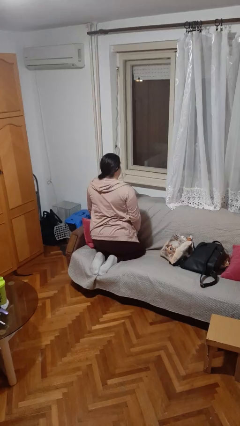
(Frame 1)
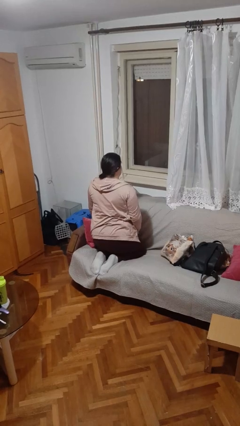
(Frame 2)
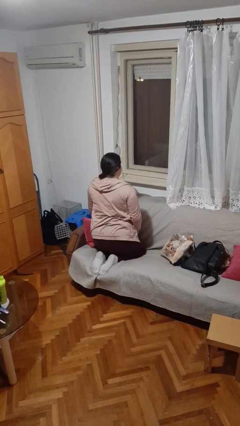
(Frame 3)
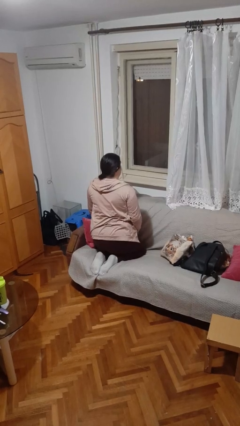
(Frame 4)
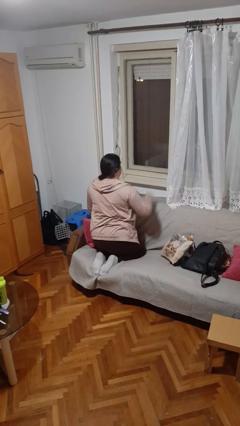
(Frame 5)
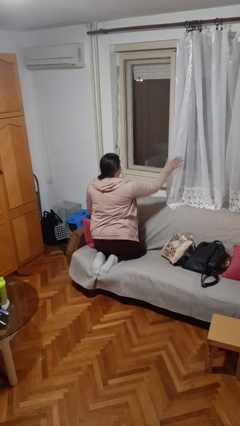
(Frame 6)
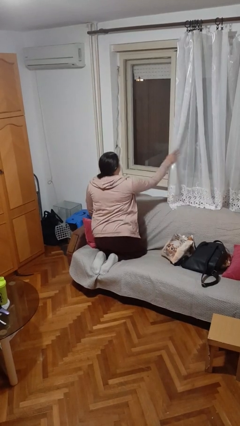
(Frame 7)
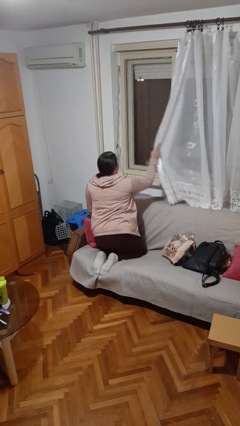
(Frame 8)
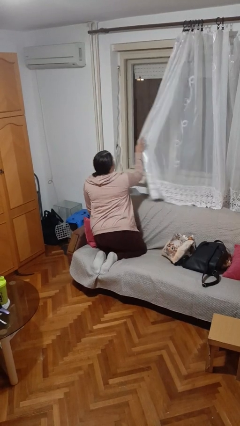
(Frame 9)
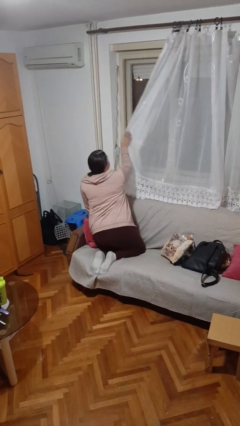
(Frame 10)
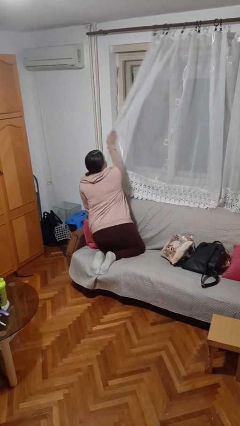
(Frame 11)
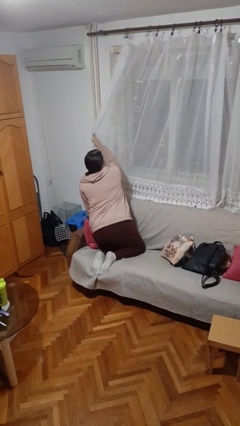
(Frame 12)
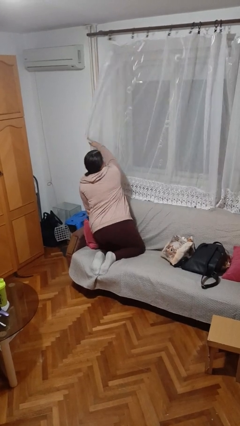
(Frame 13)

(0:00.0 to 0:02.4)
person closes curtains

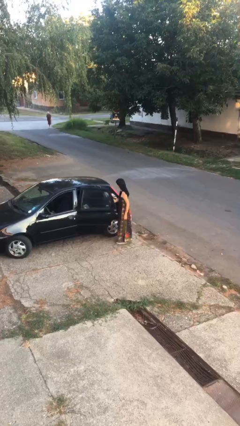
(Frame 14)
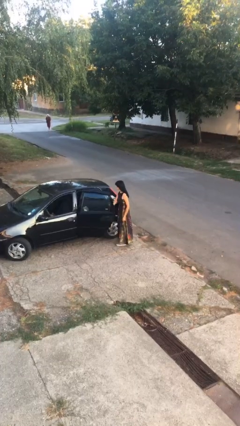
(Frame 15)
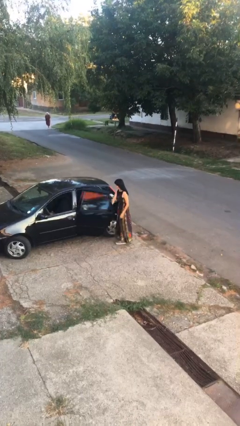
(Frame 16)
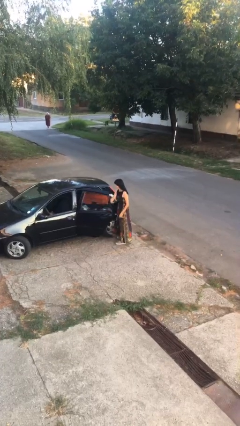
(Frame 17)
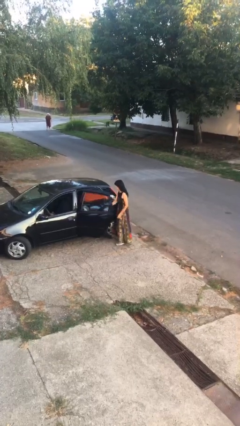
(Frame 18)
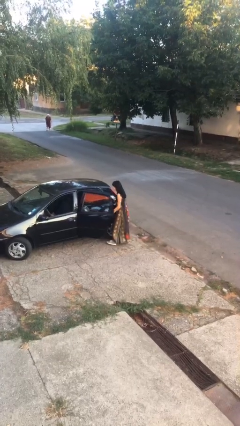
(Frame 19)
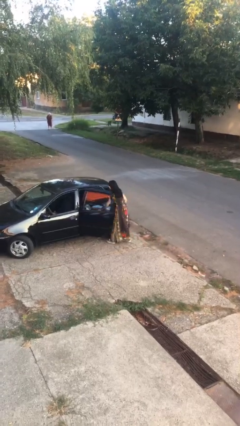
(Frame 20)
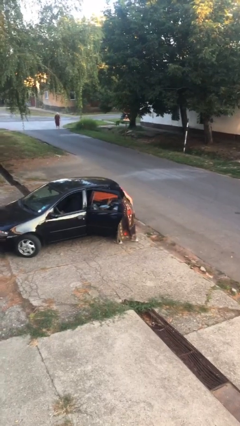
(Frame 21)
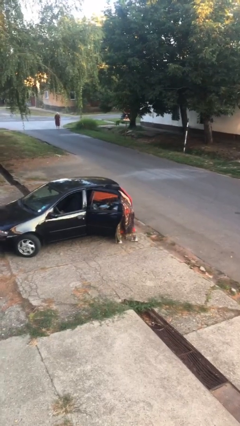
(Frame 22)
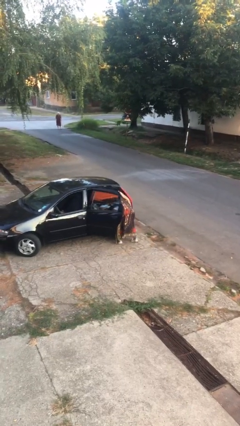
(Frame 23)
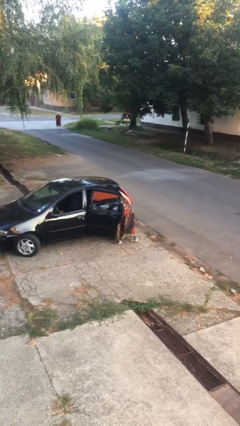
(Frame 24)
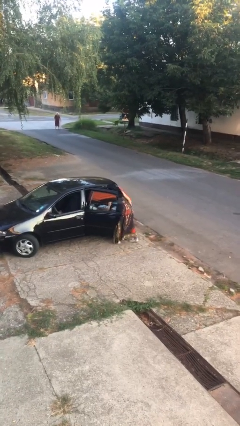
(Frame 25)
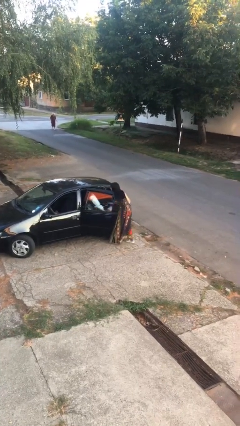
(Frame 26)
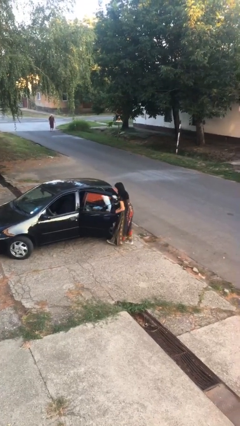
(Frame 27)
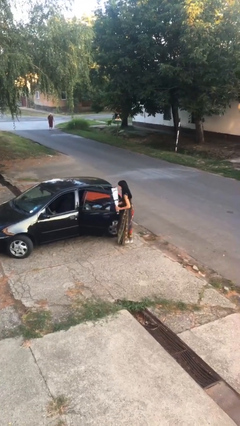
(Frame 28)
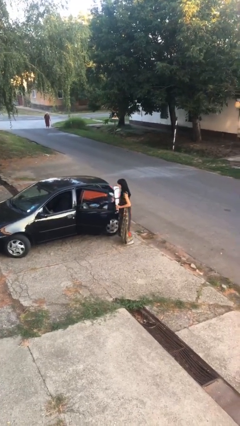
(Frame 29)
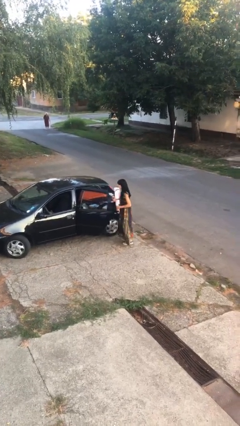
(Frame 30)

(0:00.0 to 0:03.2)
person unloads car

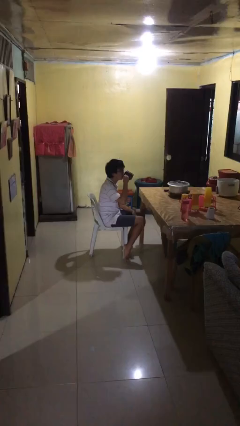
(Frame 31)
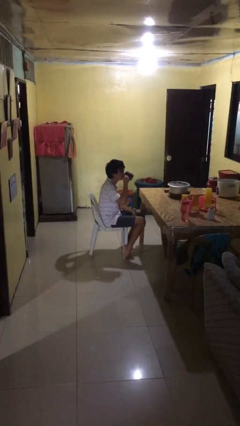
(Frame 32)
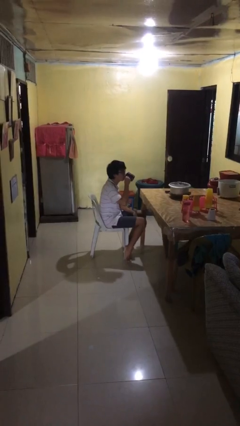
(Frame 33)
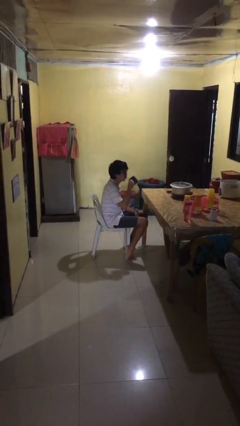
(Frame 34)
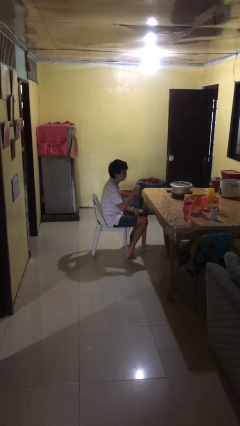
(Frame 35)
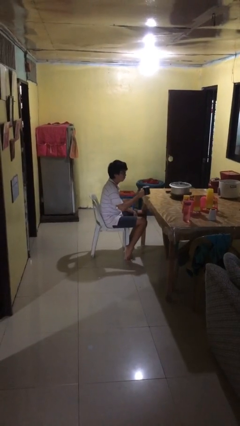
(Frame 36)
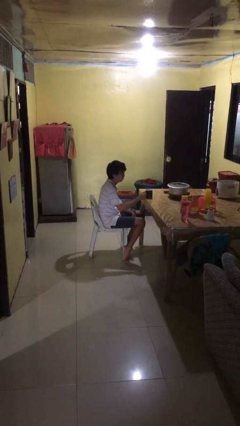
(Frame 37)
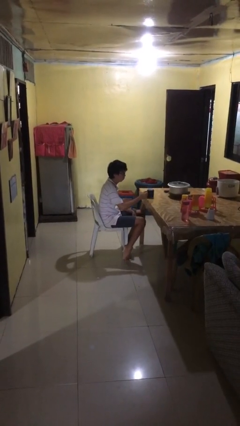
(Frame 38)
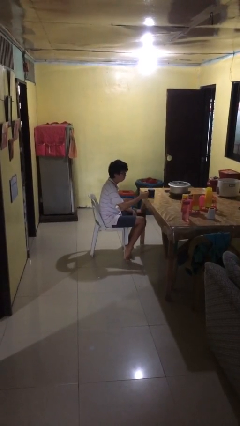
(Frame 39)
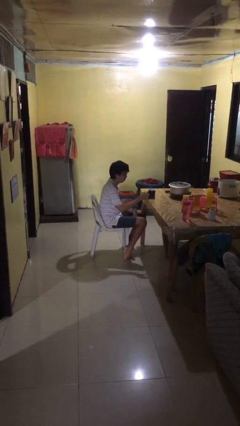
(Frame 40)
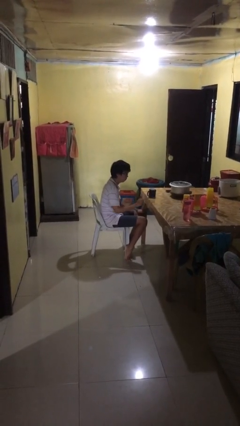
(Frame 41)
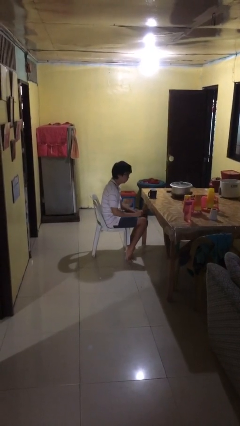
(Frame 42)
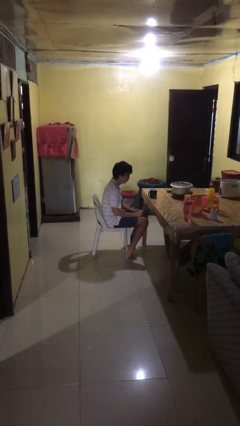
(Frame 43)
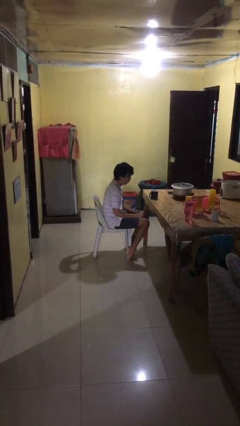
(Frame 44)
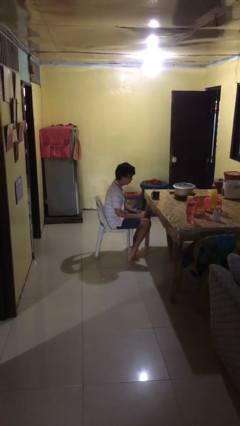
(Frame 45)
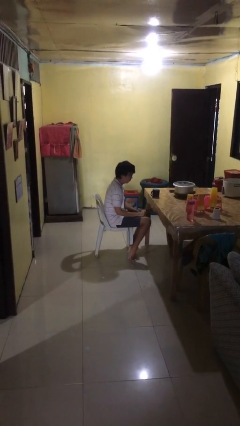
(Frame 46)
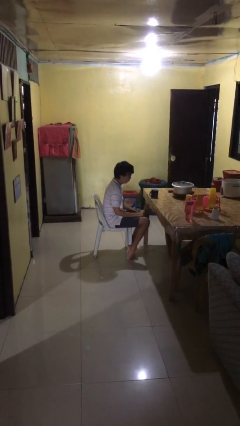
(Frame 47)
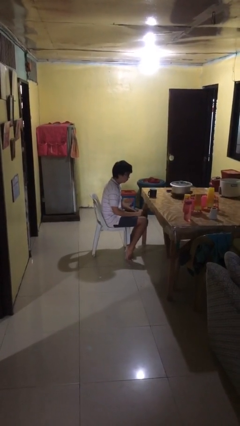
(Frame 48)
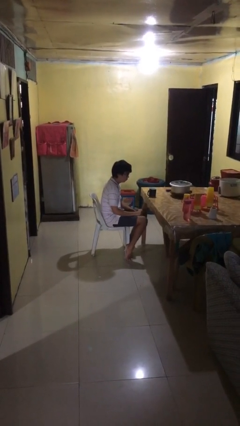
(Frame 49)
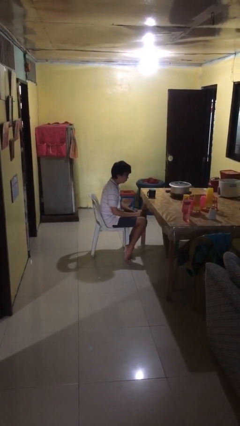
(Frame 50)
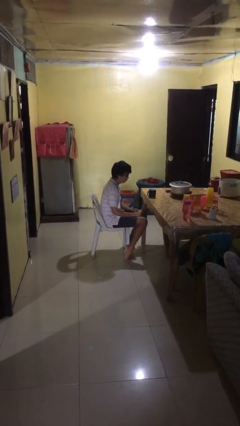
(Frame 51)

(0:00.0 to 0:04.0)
person puts down object on table

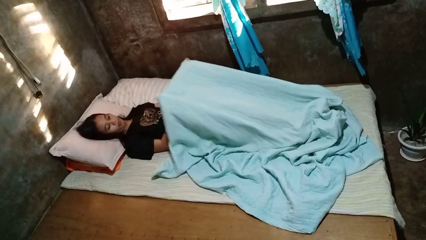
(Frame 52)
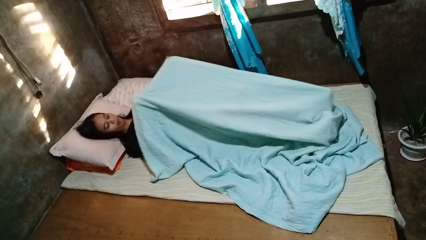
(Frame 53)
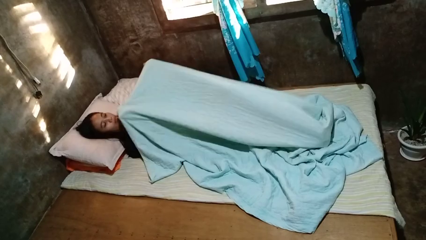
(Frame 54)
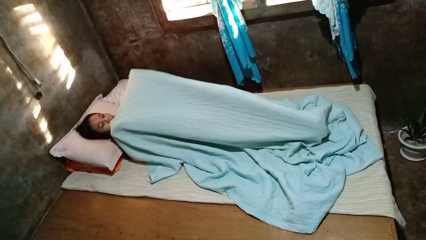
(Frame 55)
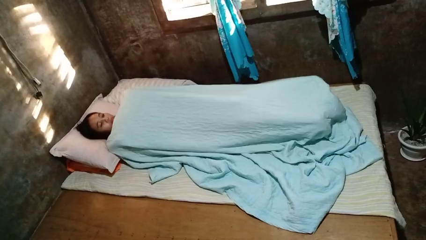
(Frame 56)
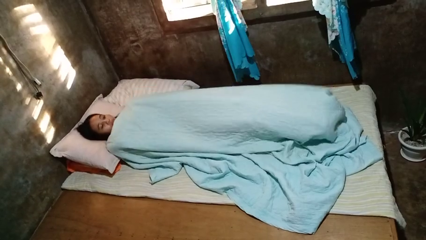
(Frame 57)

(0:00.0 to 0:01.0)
person covers with bedsheets

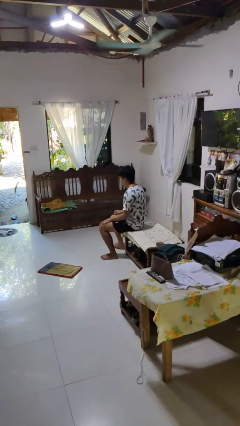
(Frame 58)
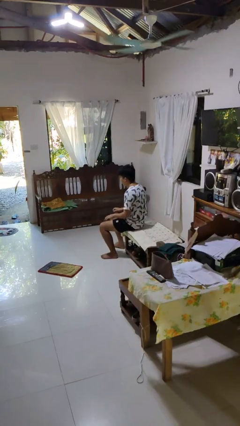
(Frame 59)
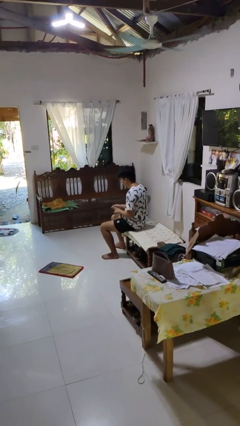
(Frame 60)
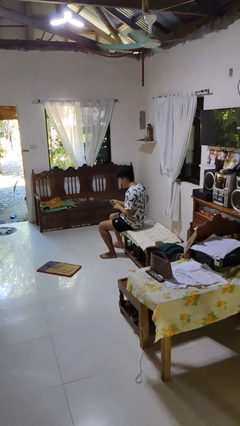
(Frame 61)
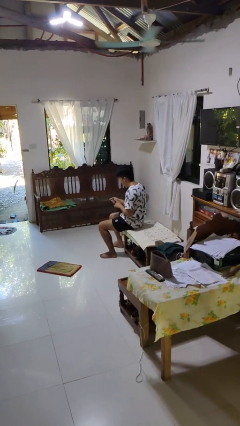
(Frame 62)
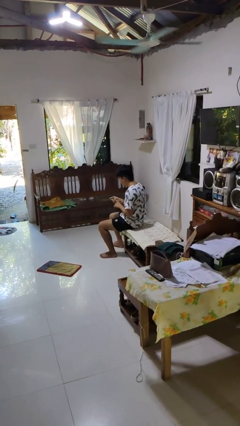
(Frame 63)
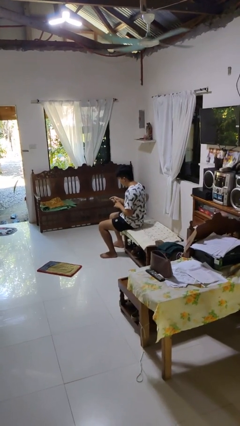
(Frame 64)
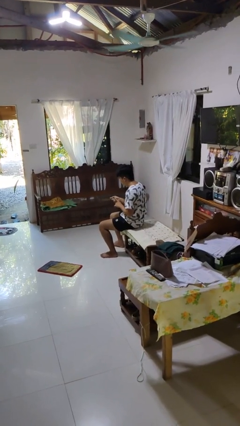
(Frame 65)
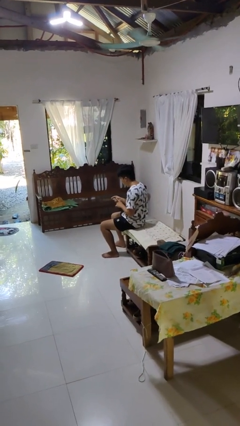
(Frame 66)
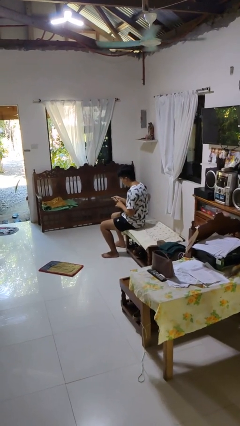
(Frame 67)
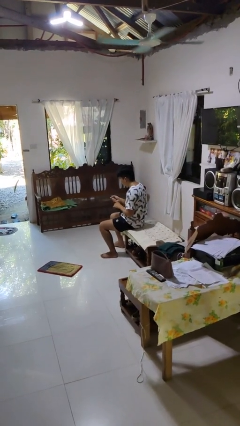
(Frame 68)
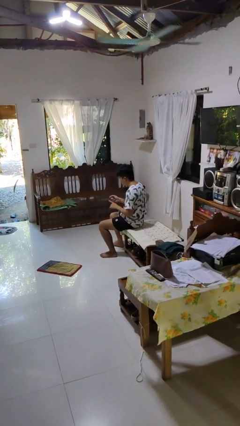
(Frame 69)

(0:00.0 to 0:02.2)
person clips fingernails

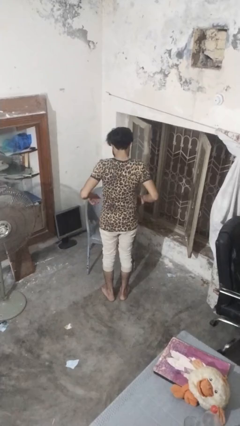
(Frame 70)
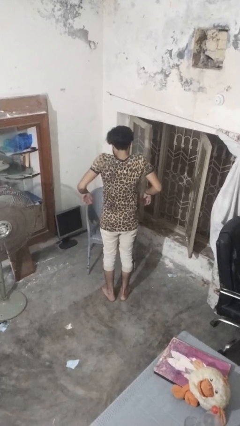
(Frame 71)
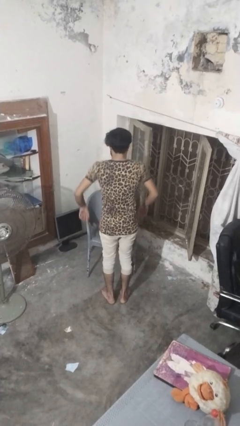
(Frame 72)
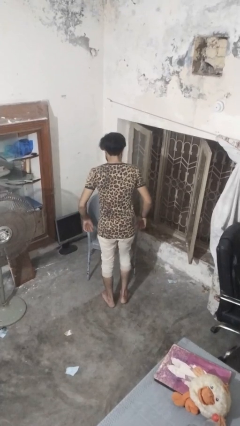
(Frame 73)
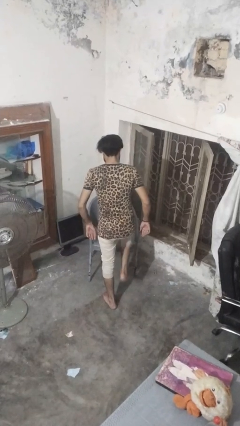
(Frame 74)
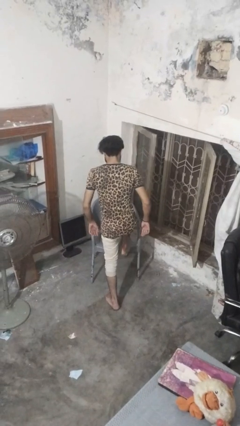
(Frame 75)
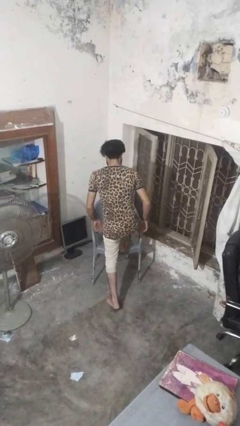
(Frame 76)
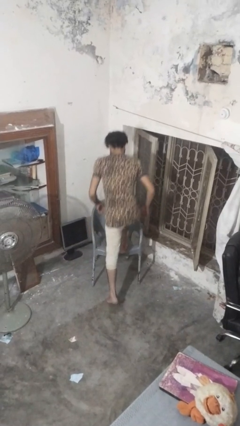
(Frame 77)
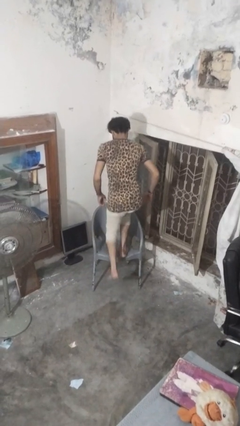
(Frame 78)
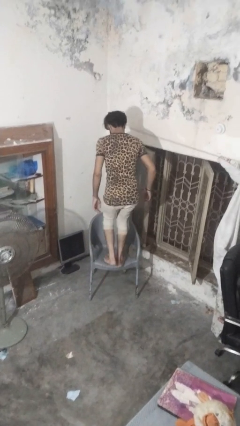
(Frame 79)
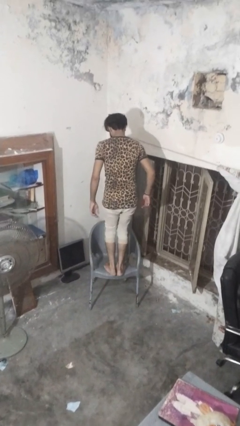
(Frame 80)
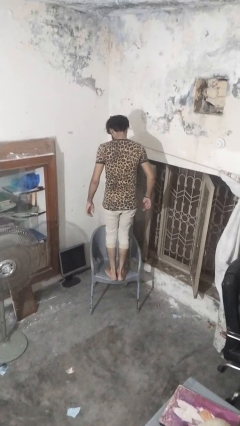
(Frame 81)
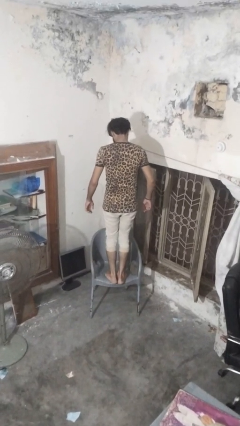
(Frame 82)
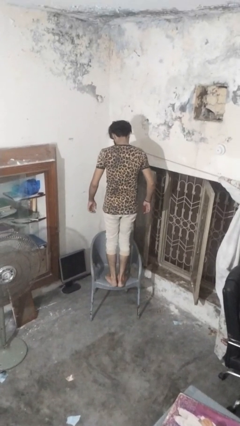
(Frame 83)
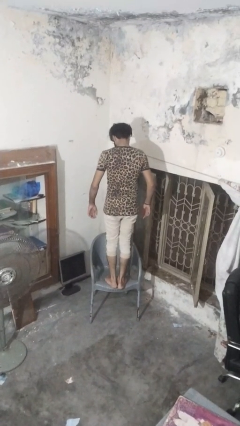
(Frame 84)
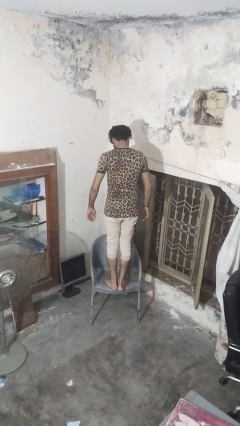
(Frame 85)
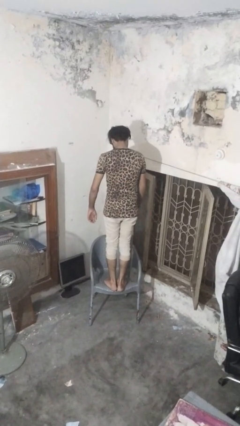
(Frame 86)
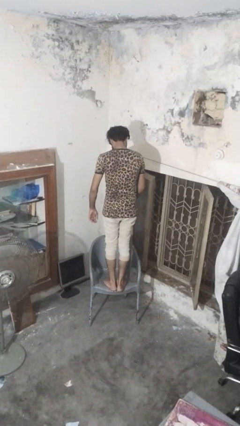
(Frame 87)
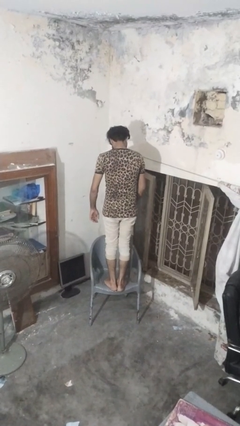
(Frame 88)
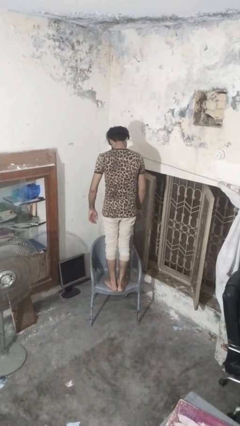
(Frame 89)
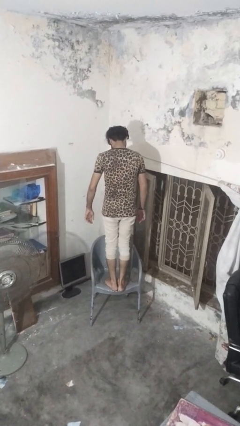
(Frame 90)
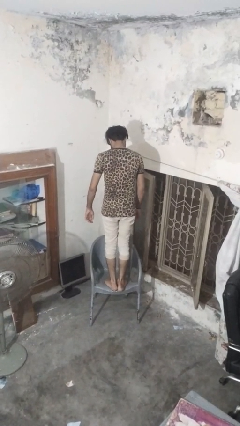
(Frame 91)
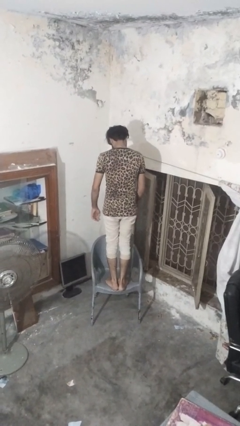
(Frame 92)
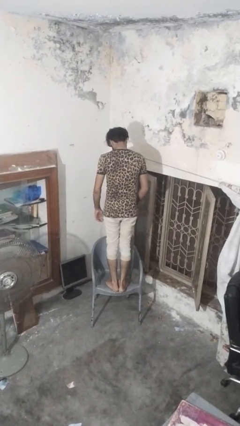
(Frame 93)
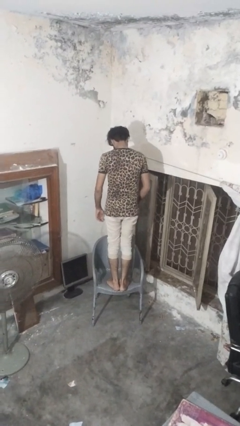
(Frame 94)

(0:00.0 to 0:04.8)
person climbs on chair
